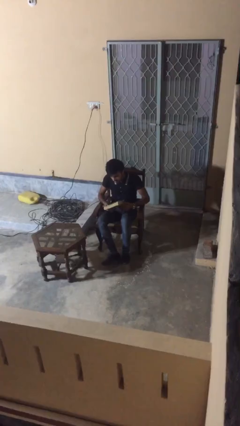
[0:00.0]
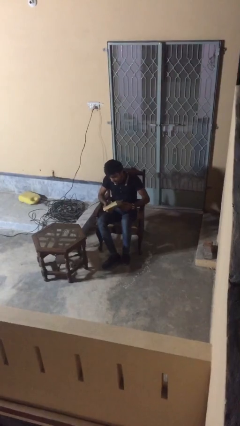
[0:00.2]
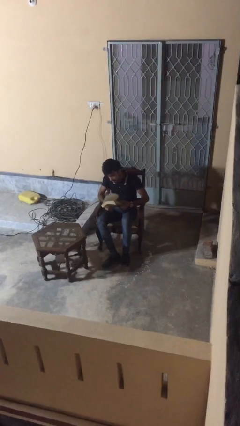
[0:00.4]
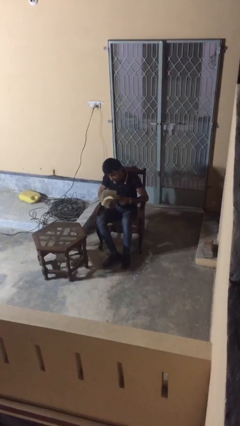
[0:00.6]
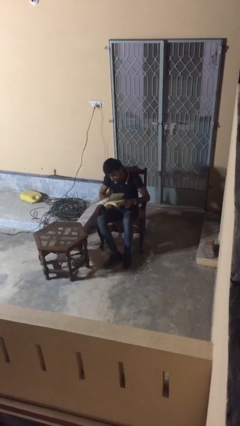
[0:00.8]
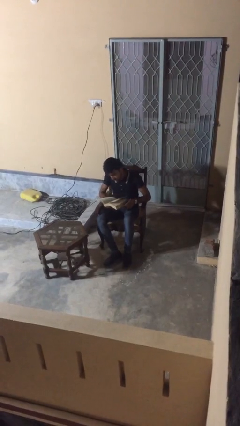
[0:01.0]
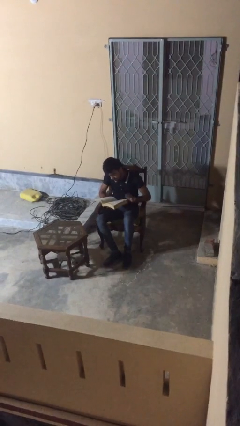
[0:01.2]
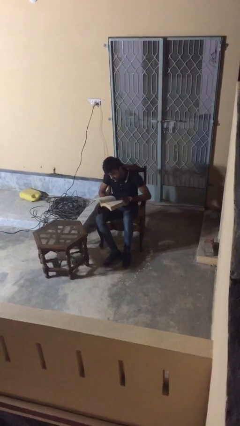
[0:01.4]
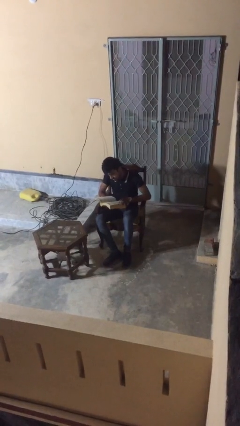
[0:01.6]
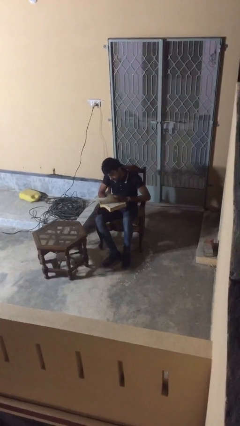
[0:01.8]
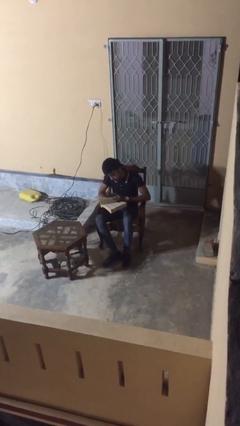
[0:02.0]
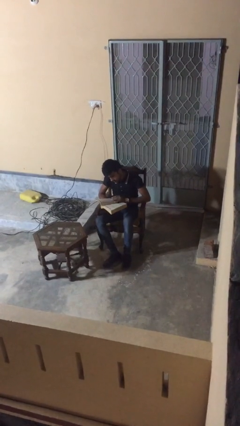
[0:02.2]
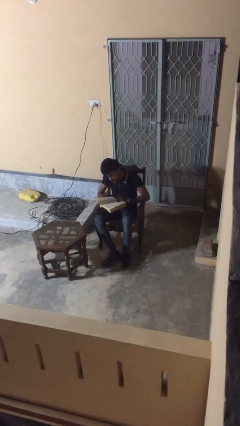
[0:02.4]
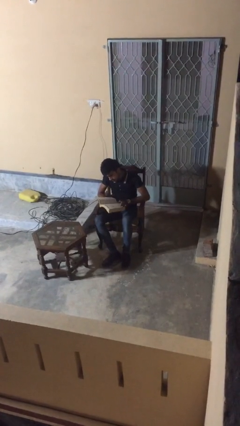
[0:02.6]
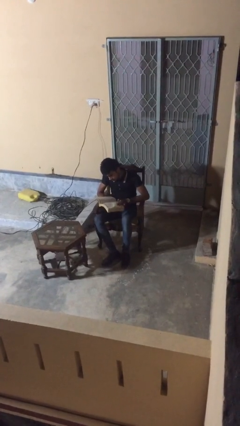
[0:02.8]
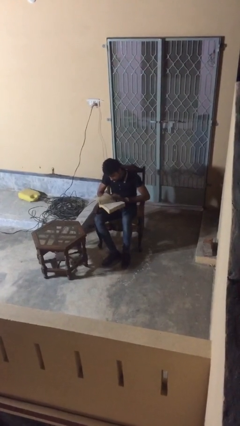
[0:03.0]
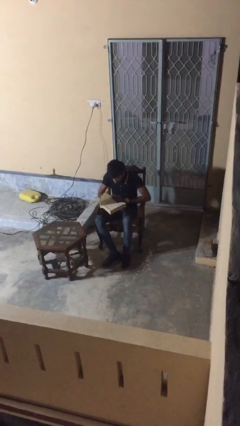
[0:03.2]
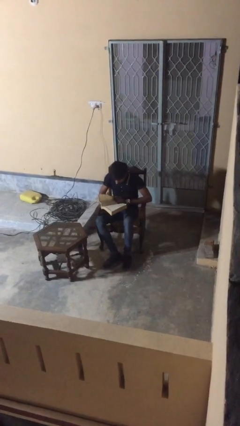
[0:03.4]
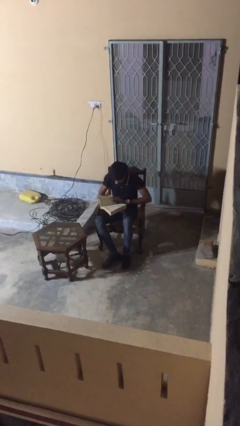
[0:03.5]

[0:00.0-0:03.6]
person reads document

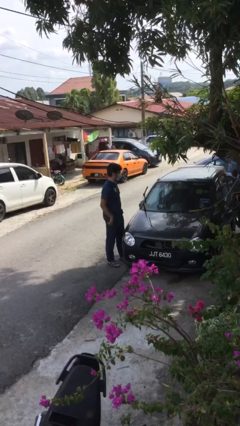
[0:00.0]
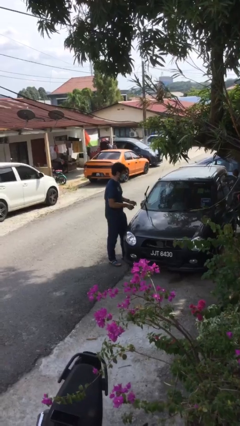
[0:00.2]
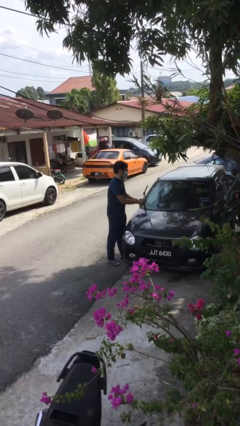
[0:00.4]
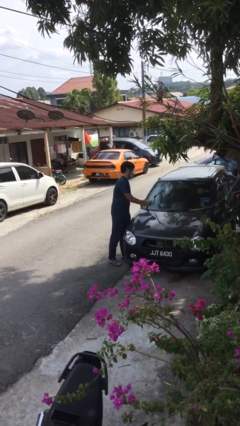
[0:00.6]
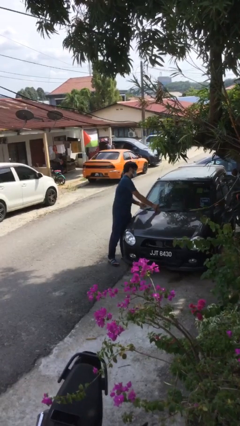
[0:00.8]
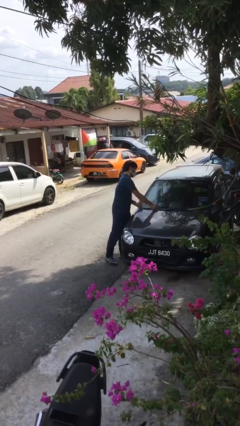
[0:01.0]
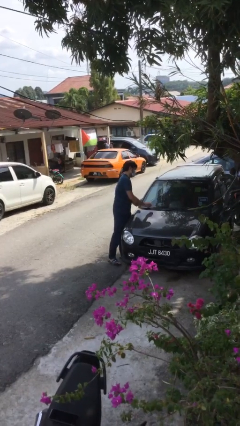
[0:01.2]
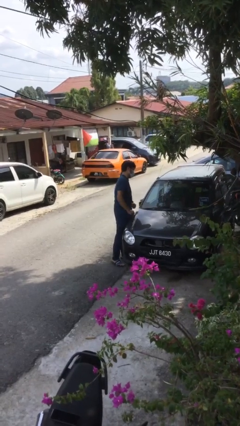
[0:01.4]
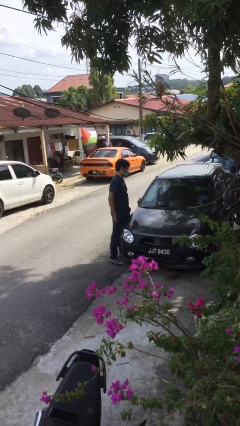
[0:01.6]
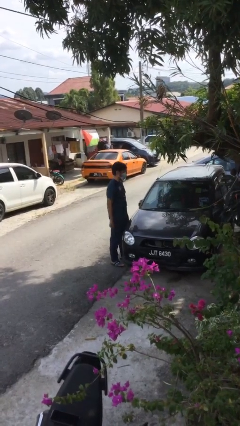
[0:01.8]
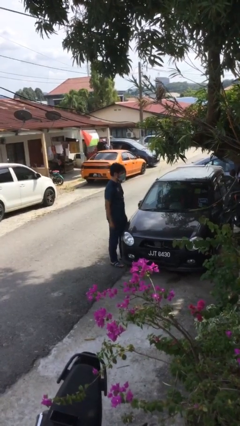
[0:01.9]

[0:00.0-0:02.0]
person flips down car wipers

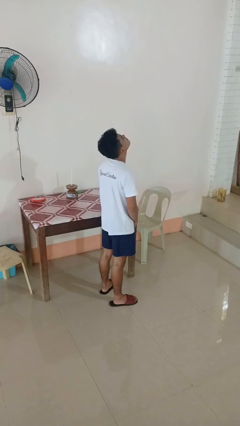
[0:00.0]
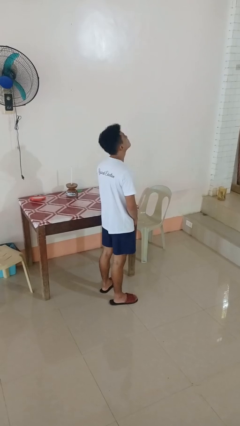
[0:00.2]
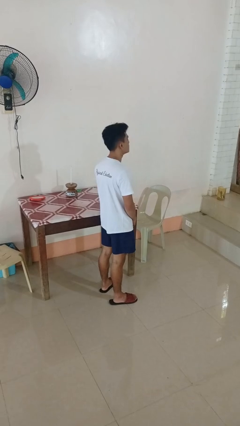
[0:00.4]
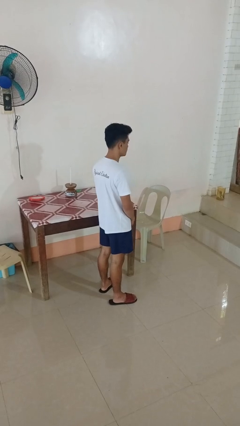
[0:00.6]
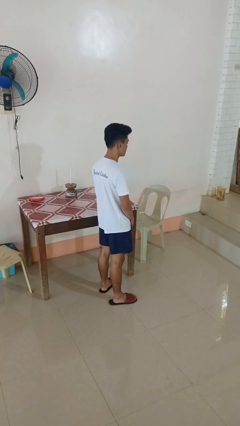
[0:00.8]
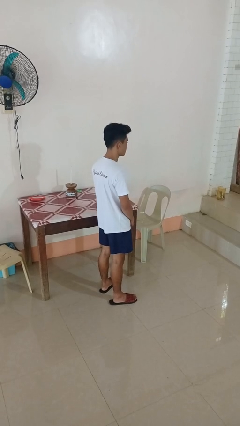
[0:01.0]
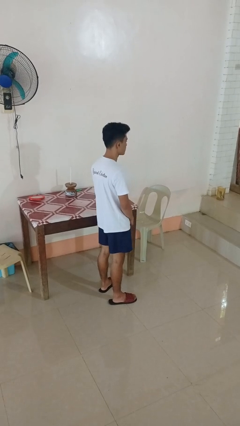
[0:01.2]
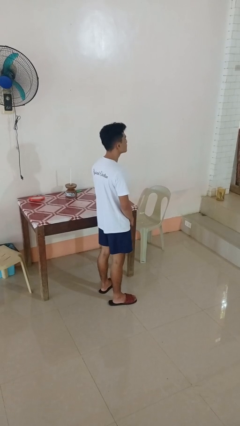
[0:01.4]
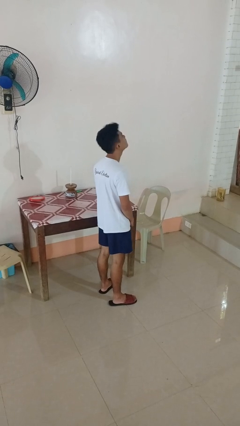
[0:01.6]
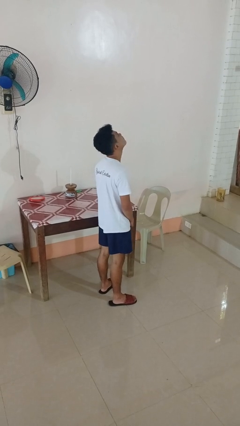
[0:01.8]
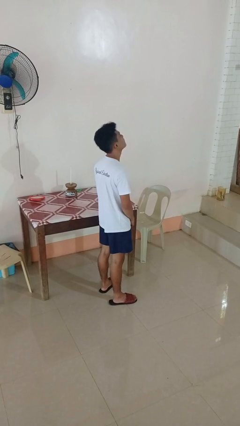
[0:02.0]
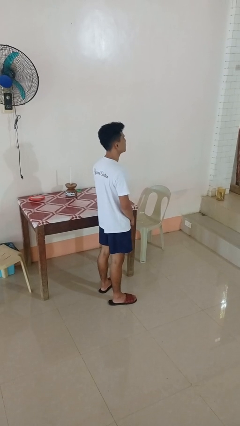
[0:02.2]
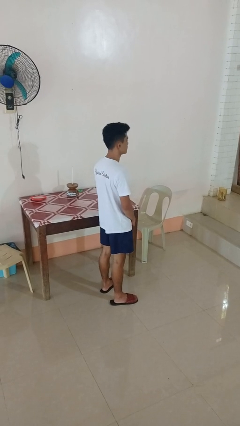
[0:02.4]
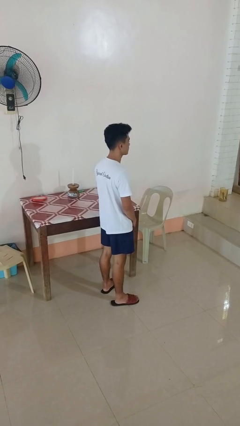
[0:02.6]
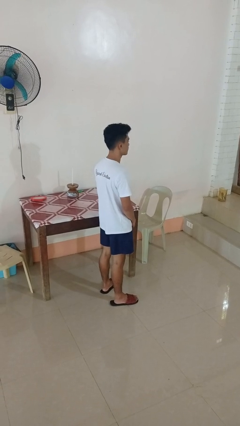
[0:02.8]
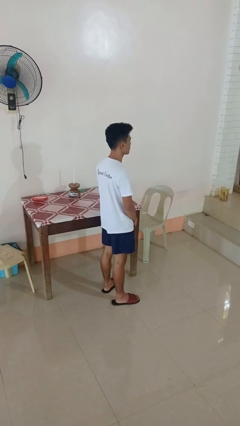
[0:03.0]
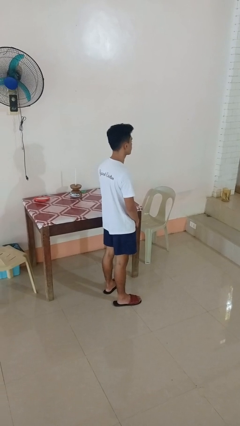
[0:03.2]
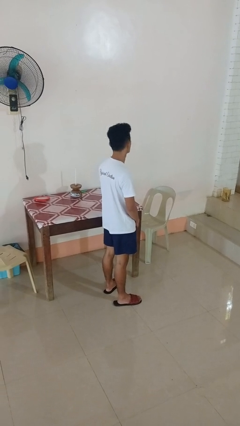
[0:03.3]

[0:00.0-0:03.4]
person nods head

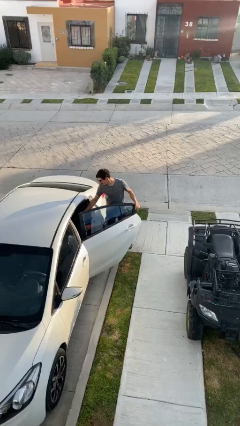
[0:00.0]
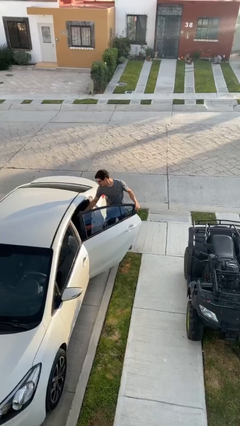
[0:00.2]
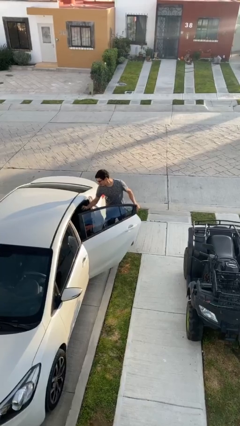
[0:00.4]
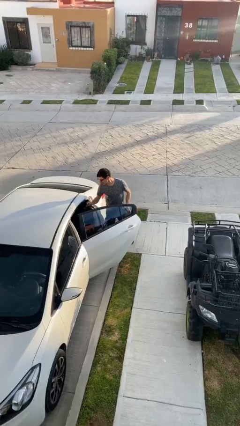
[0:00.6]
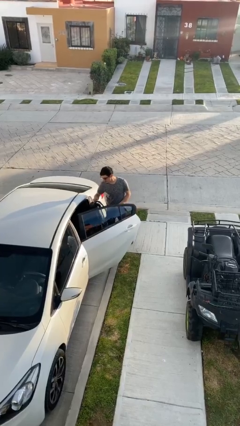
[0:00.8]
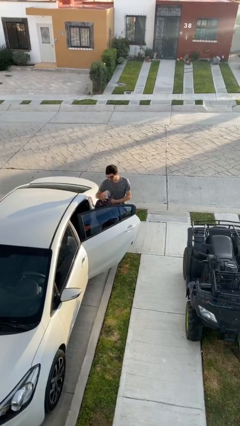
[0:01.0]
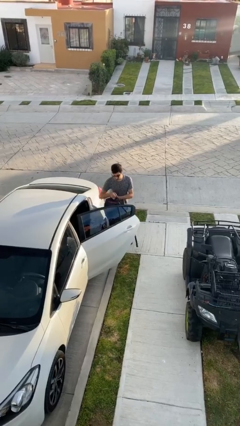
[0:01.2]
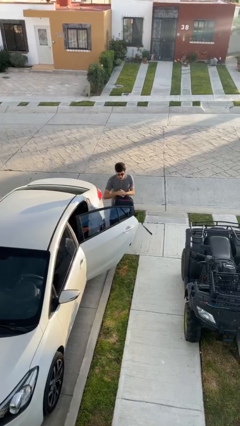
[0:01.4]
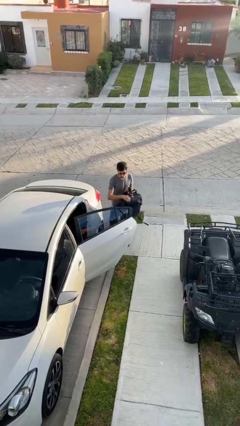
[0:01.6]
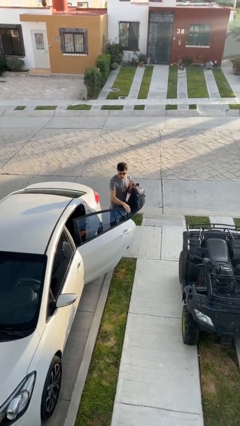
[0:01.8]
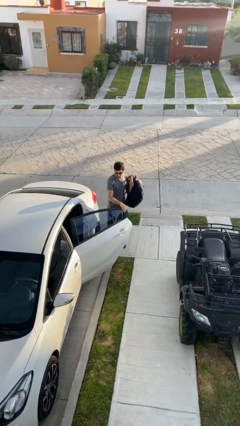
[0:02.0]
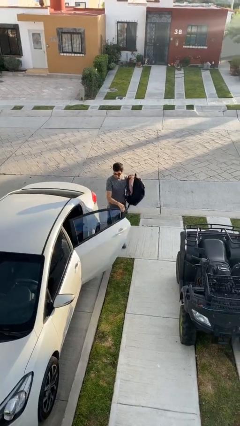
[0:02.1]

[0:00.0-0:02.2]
person unloads car

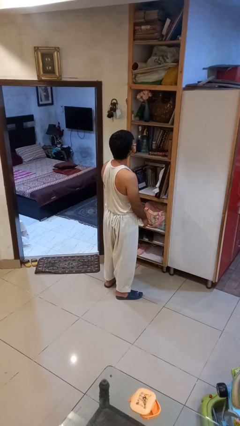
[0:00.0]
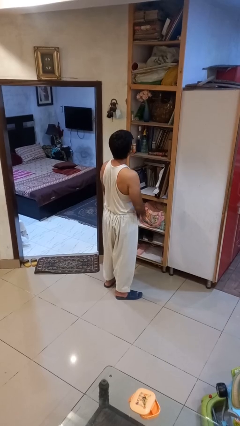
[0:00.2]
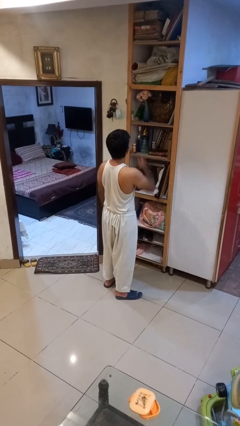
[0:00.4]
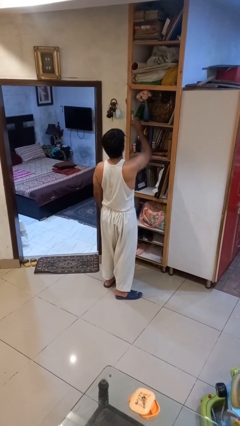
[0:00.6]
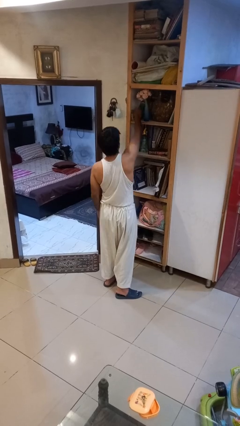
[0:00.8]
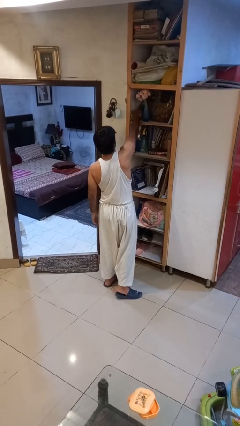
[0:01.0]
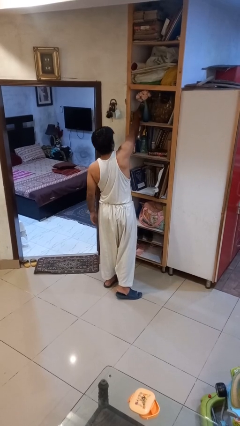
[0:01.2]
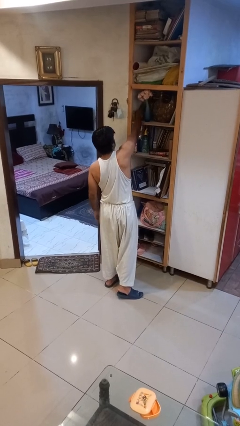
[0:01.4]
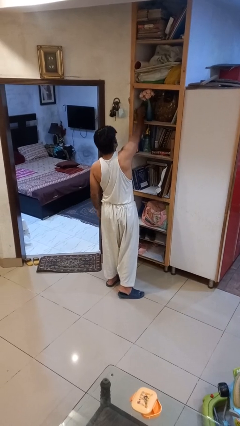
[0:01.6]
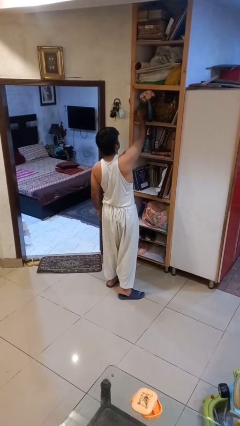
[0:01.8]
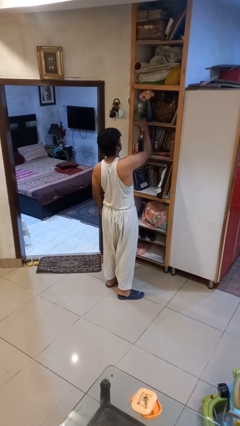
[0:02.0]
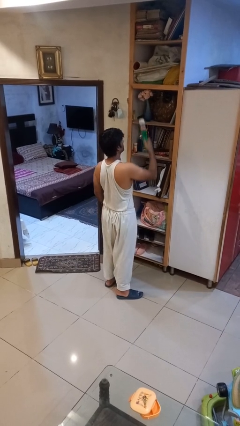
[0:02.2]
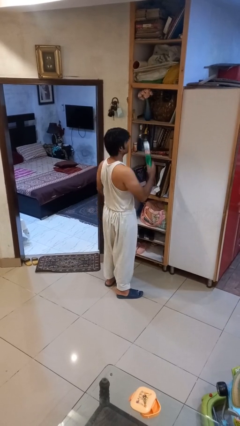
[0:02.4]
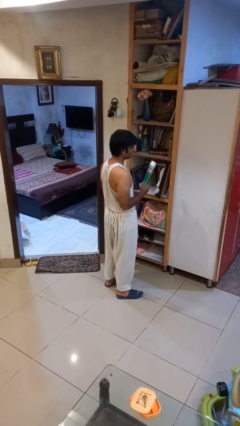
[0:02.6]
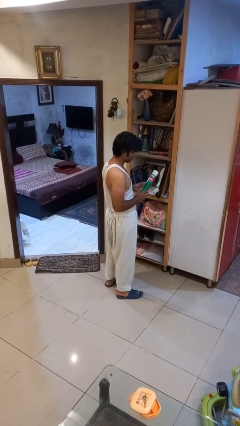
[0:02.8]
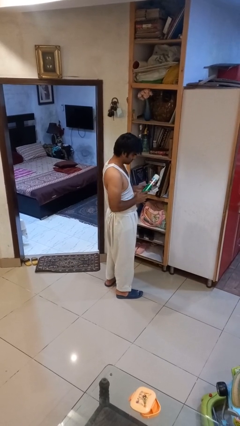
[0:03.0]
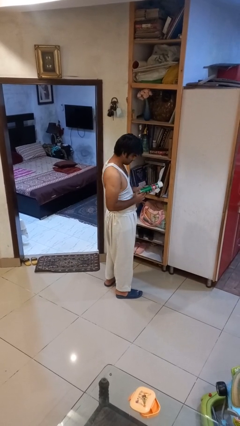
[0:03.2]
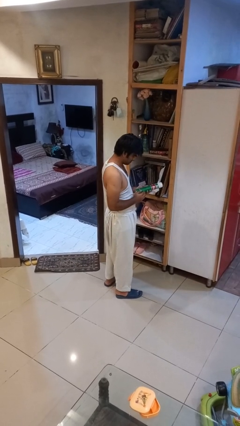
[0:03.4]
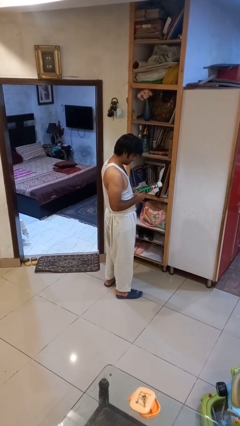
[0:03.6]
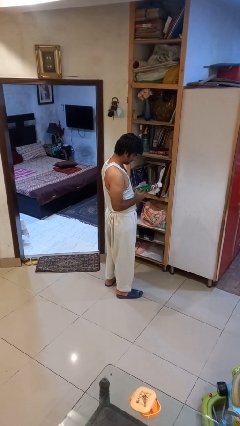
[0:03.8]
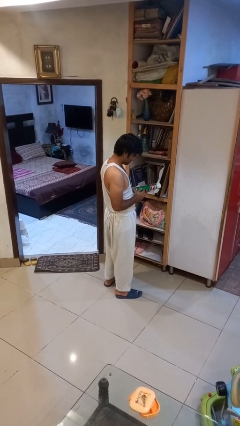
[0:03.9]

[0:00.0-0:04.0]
person picks up object from shelf

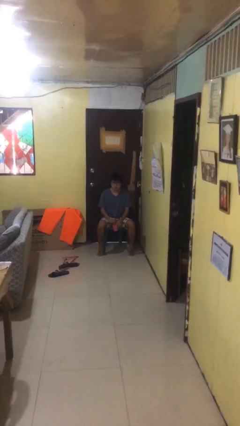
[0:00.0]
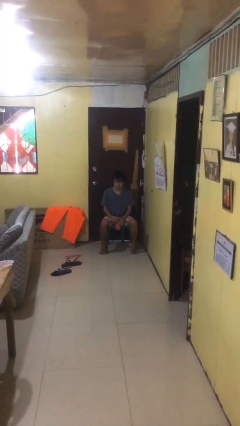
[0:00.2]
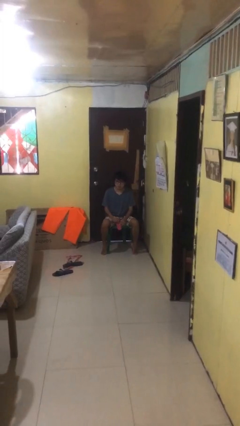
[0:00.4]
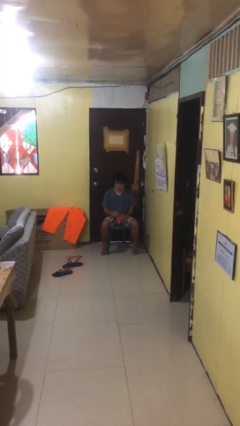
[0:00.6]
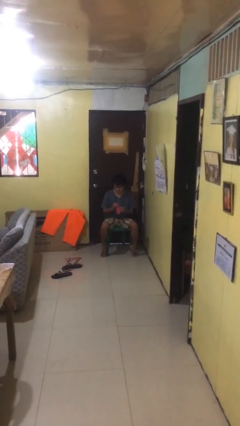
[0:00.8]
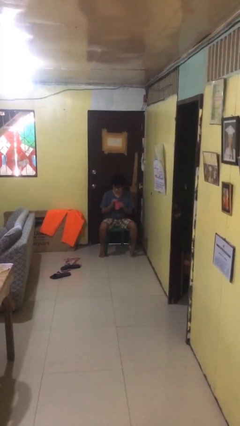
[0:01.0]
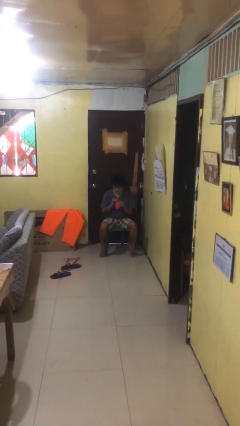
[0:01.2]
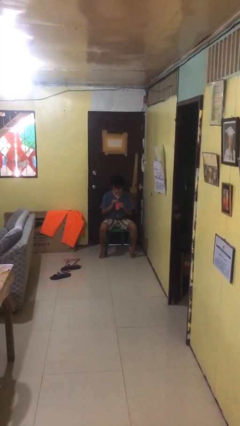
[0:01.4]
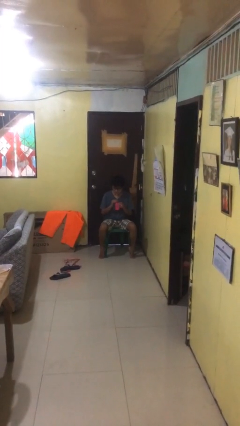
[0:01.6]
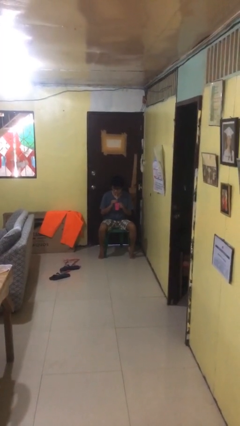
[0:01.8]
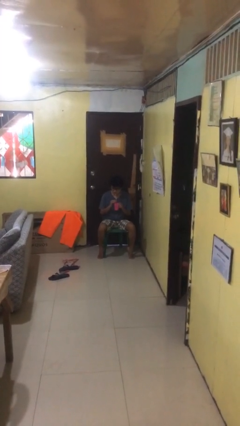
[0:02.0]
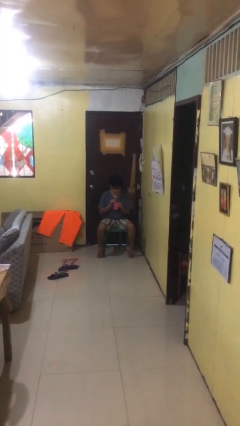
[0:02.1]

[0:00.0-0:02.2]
person drinks from straw

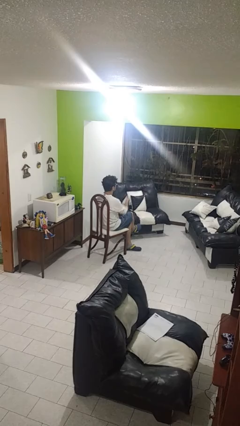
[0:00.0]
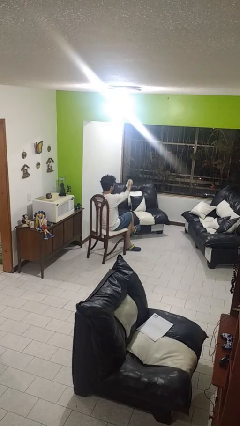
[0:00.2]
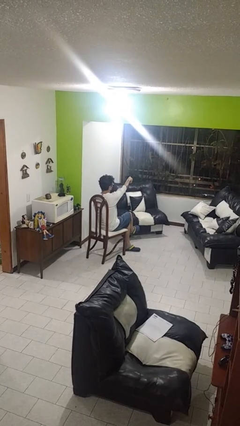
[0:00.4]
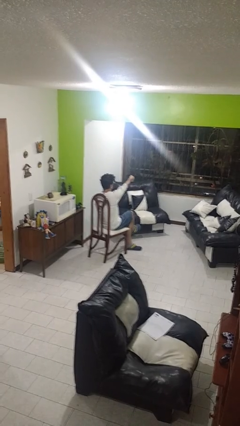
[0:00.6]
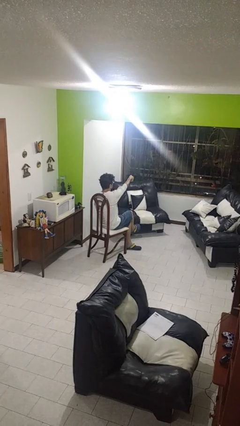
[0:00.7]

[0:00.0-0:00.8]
person uses television remote
